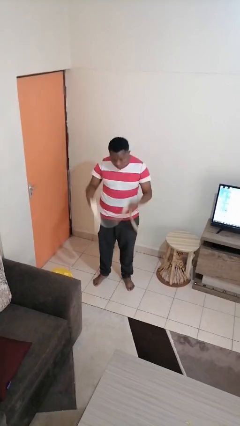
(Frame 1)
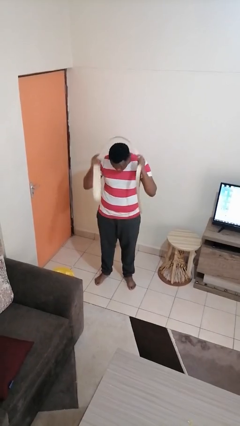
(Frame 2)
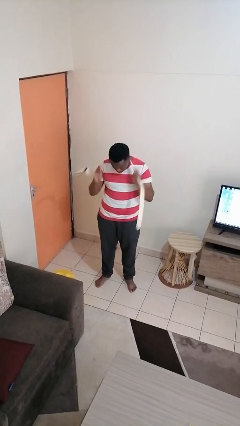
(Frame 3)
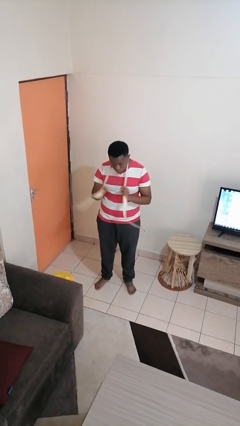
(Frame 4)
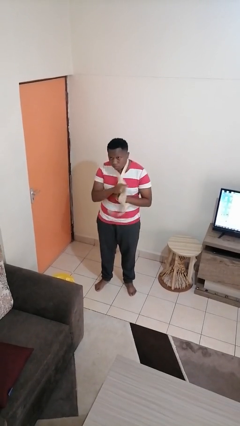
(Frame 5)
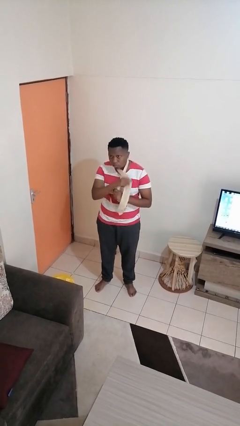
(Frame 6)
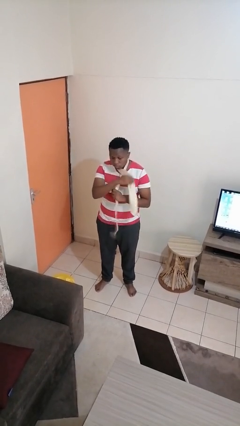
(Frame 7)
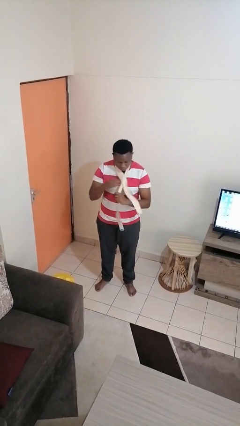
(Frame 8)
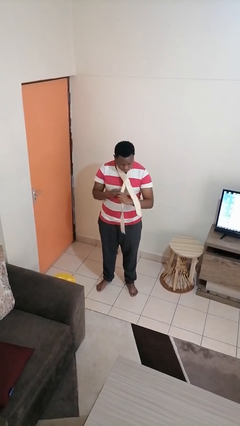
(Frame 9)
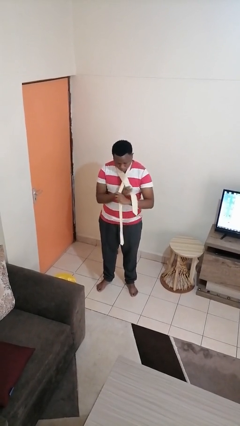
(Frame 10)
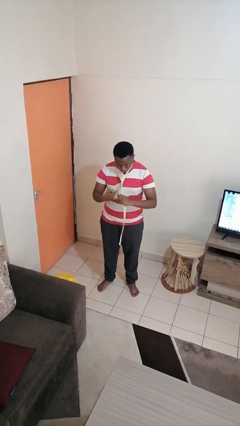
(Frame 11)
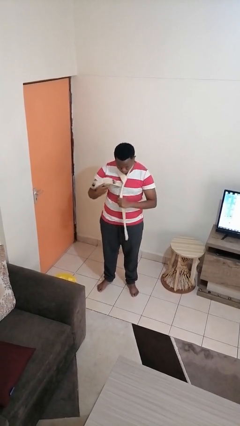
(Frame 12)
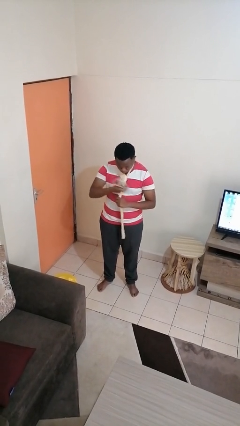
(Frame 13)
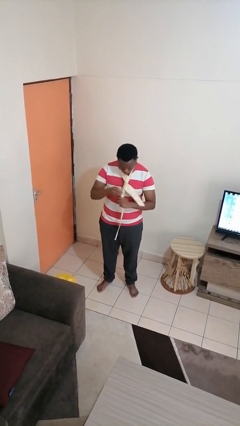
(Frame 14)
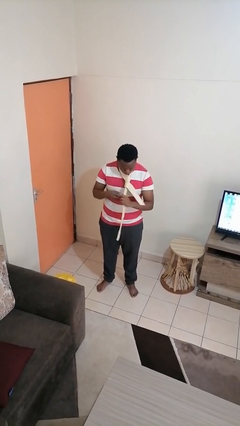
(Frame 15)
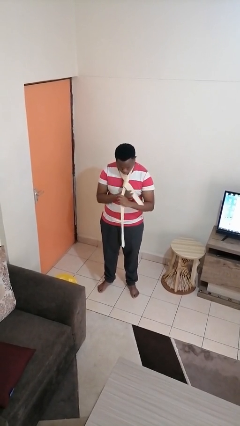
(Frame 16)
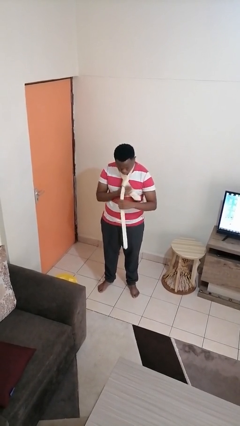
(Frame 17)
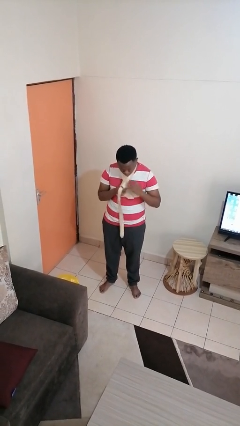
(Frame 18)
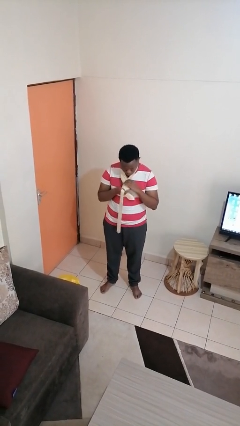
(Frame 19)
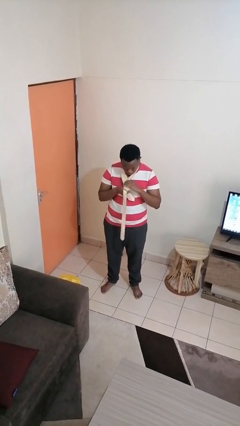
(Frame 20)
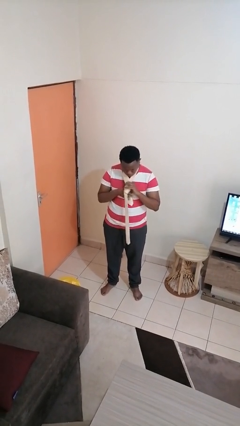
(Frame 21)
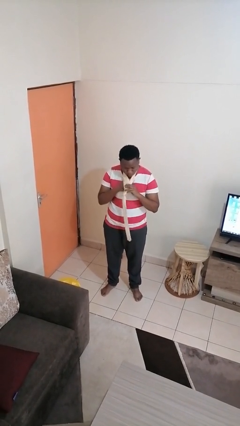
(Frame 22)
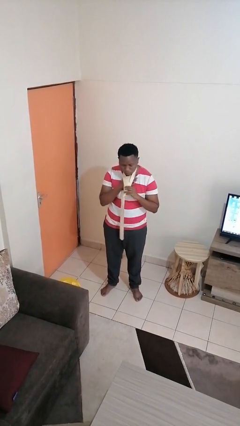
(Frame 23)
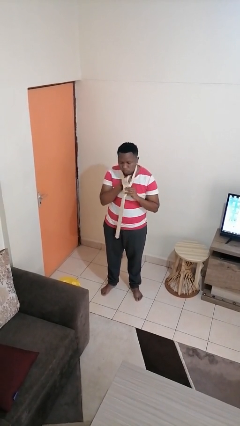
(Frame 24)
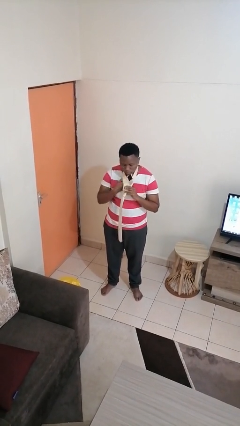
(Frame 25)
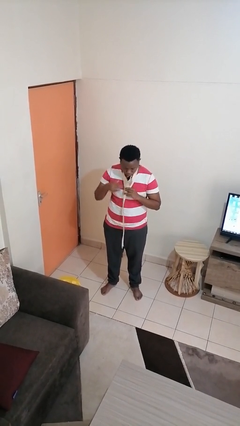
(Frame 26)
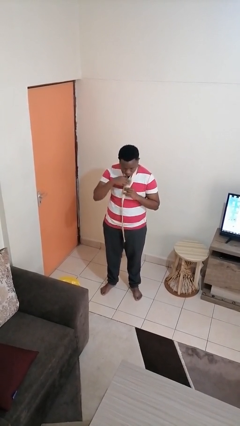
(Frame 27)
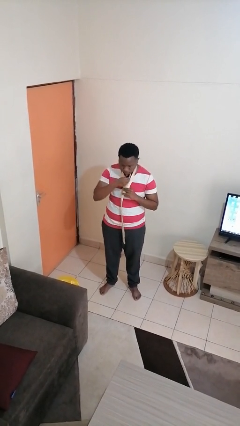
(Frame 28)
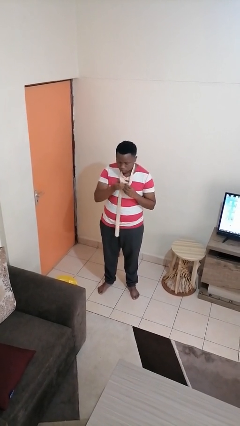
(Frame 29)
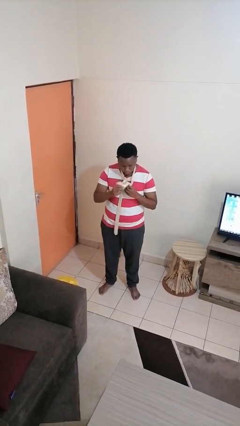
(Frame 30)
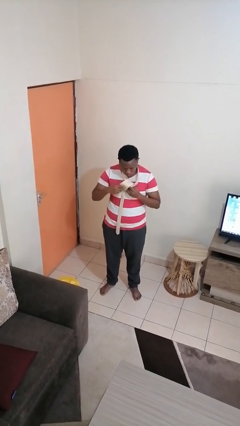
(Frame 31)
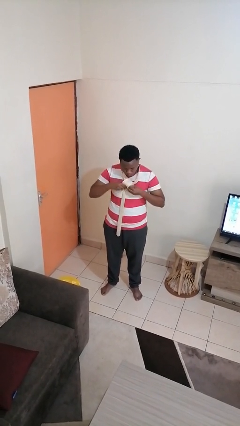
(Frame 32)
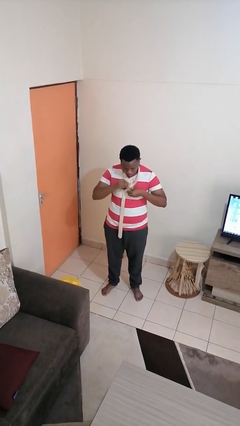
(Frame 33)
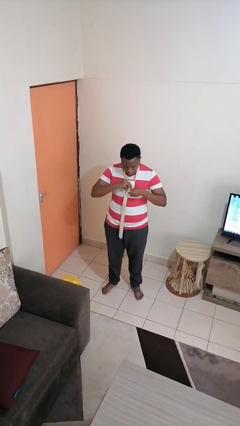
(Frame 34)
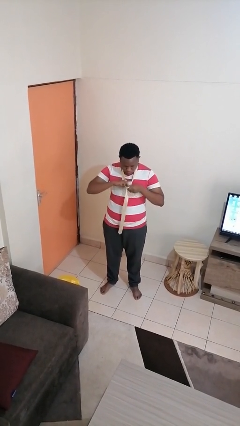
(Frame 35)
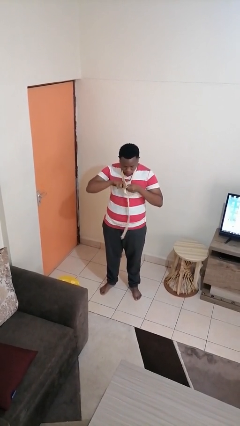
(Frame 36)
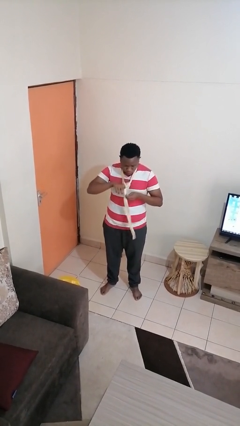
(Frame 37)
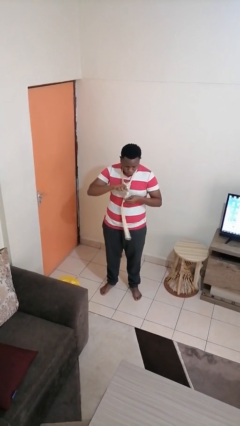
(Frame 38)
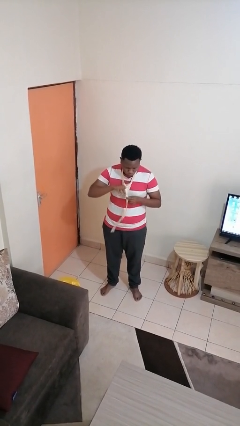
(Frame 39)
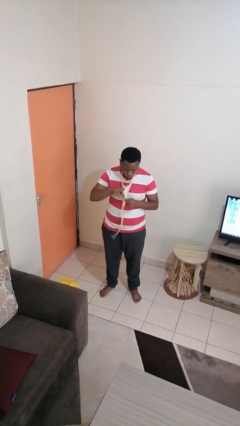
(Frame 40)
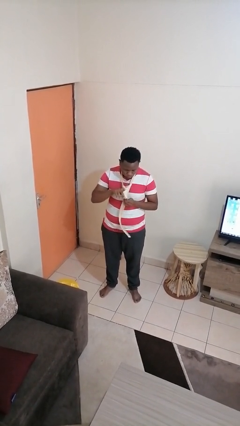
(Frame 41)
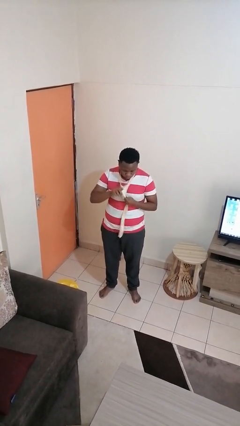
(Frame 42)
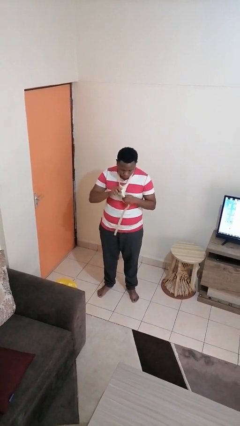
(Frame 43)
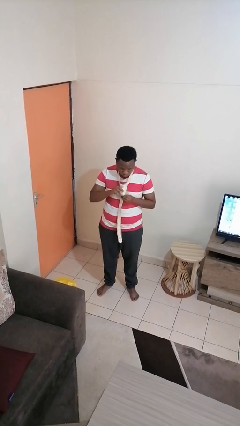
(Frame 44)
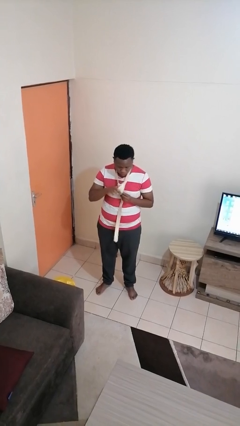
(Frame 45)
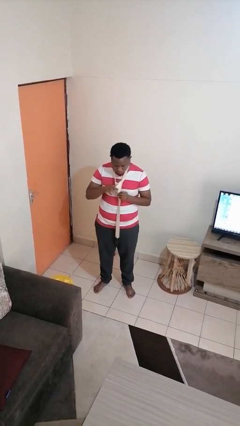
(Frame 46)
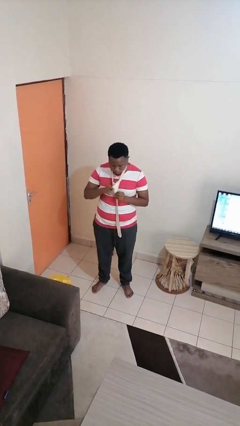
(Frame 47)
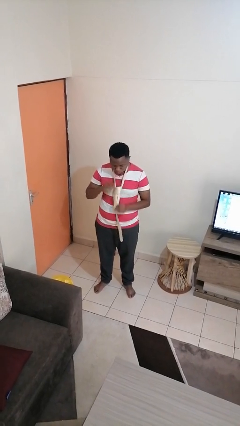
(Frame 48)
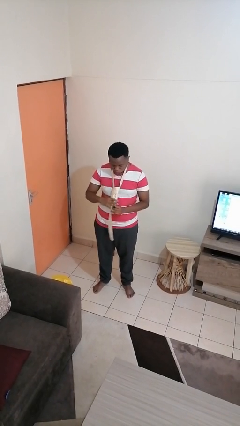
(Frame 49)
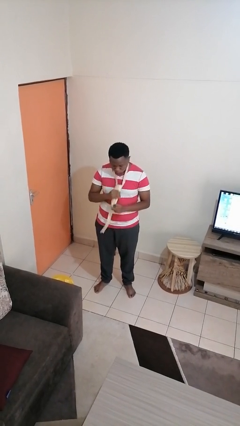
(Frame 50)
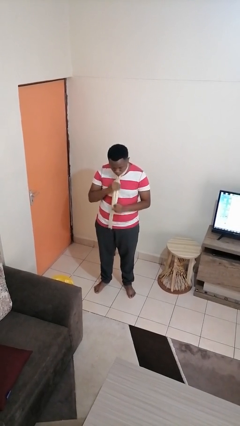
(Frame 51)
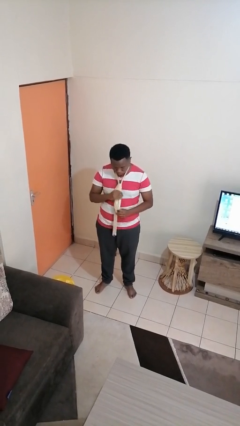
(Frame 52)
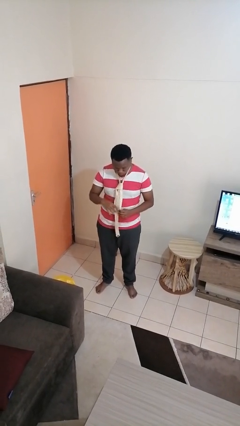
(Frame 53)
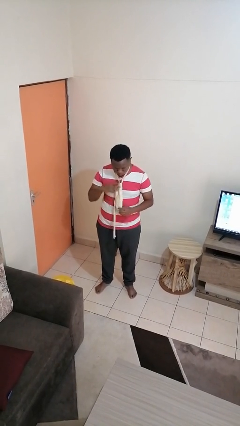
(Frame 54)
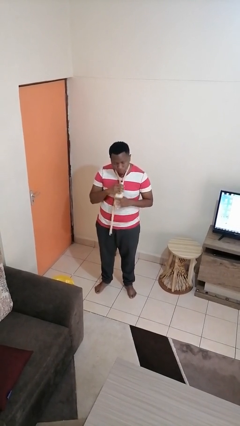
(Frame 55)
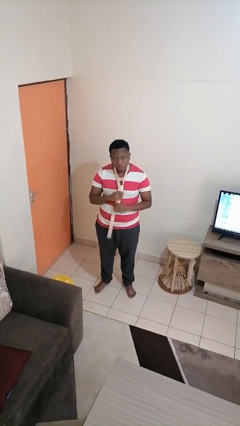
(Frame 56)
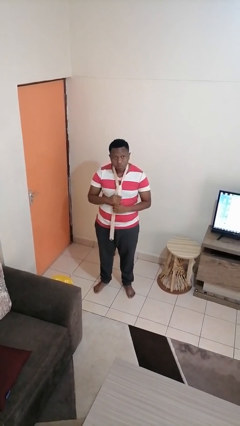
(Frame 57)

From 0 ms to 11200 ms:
person puts on necktie

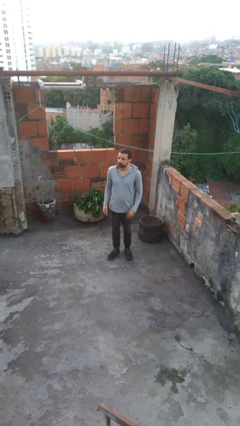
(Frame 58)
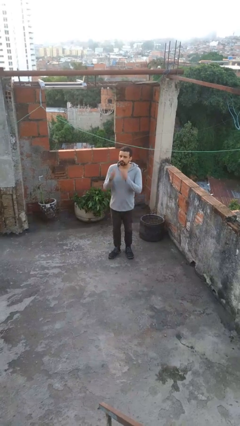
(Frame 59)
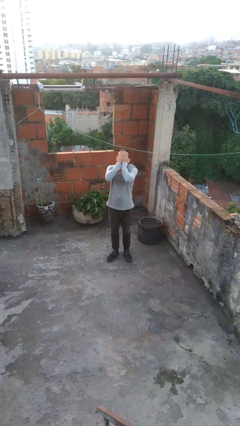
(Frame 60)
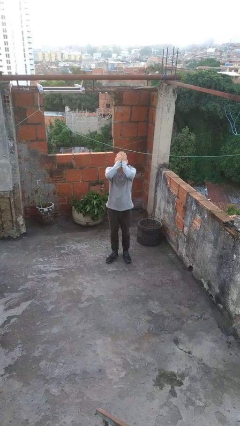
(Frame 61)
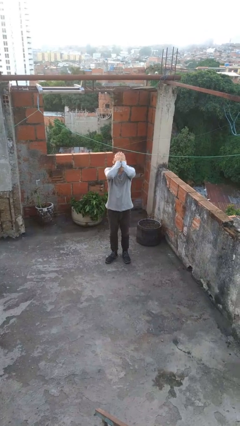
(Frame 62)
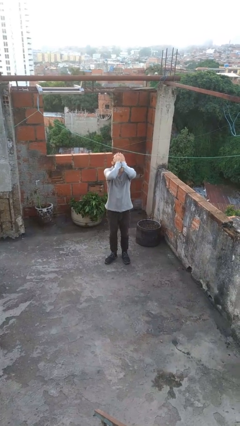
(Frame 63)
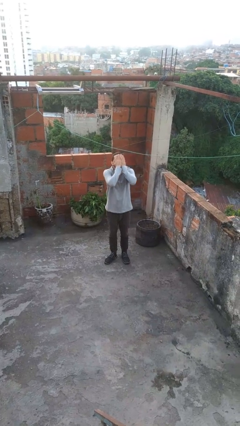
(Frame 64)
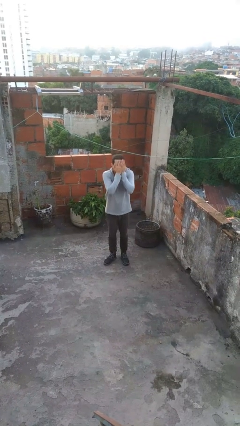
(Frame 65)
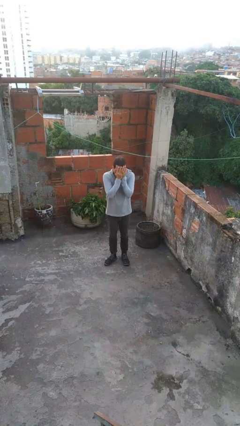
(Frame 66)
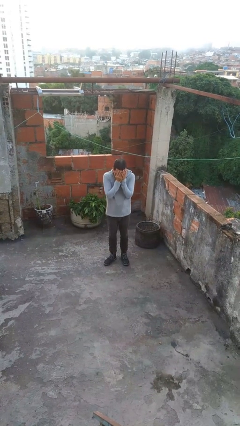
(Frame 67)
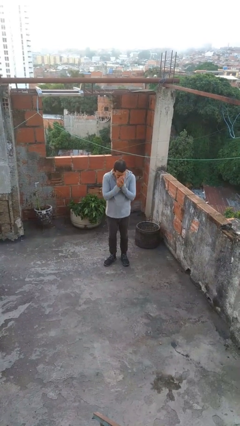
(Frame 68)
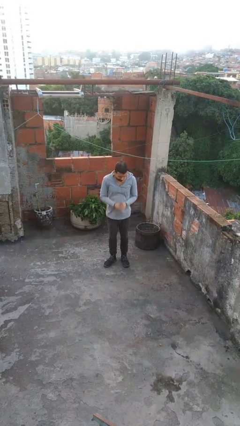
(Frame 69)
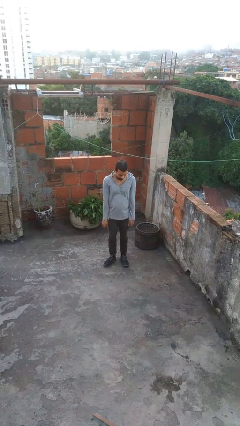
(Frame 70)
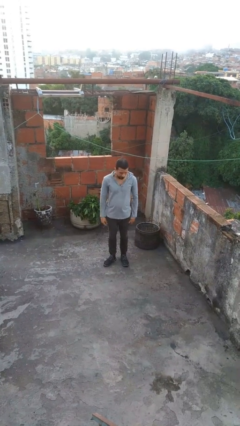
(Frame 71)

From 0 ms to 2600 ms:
person covers face with hands

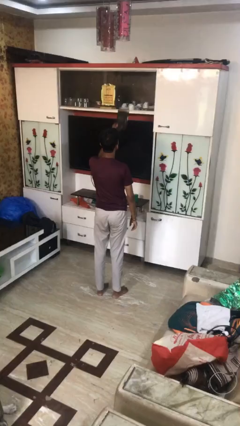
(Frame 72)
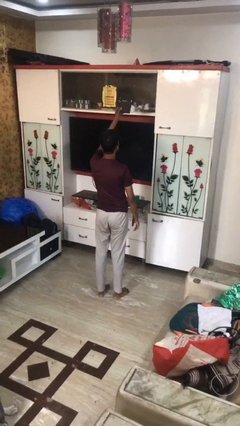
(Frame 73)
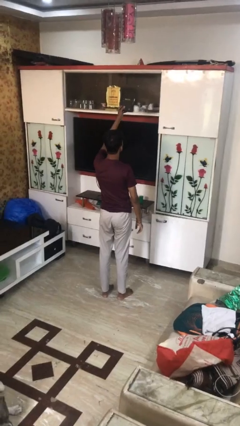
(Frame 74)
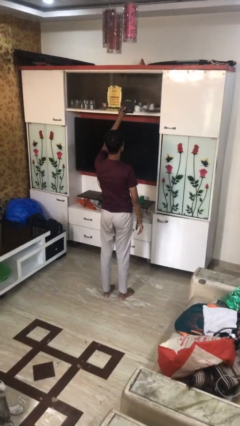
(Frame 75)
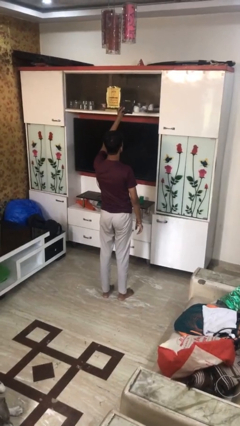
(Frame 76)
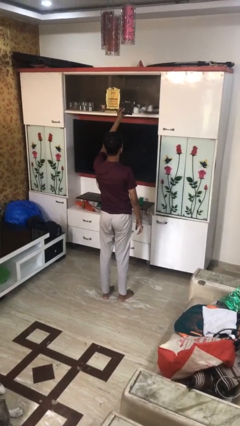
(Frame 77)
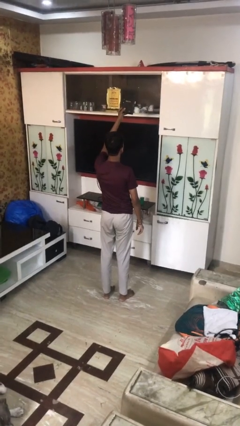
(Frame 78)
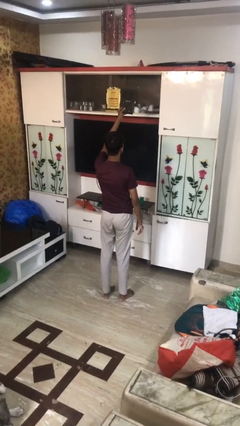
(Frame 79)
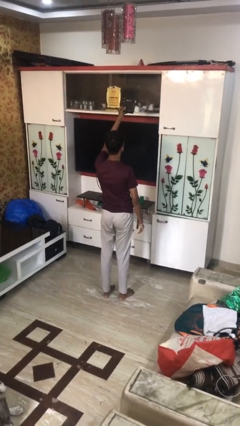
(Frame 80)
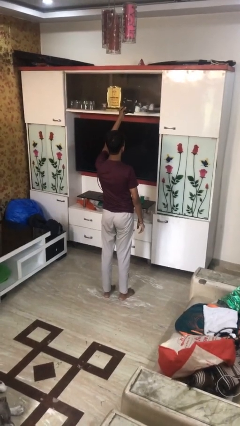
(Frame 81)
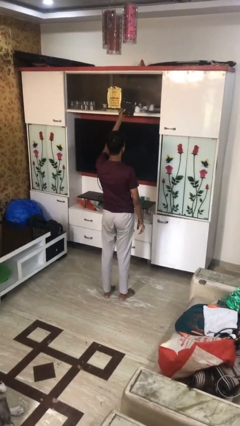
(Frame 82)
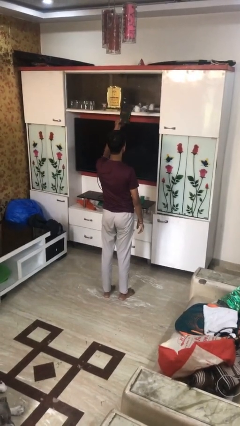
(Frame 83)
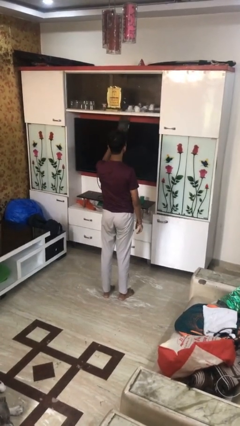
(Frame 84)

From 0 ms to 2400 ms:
person holds object above head

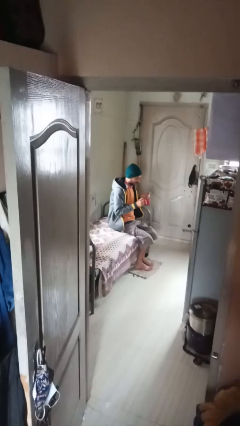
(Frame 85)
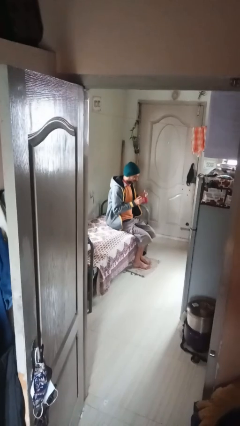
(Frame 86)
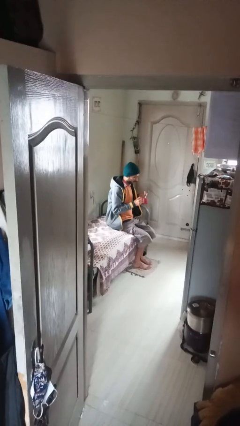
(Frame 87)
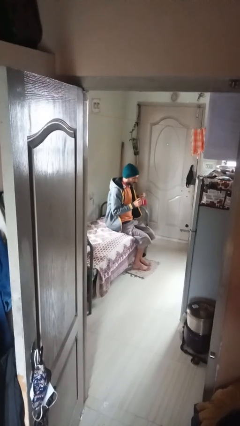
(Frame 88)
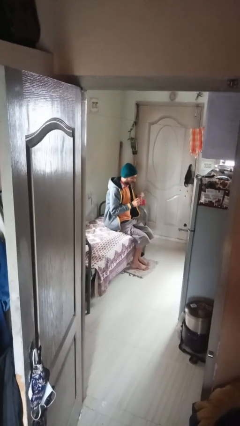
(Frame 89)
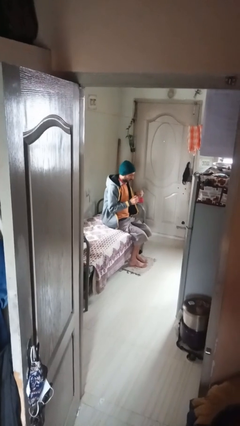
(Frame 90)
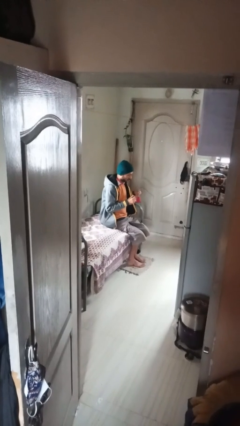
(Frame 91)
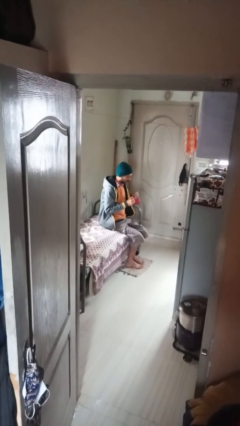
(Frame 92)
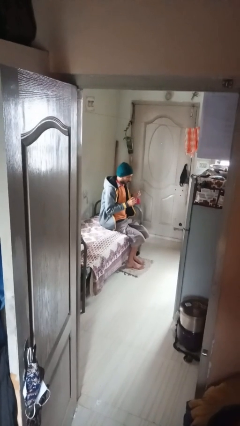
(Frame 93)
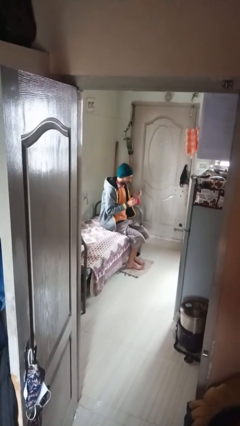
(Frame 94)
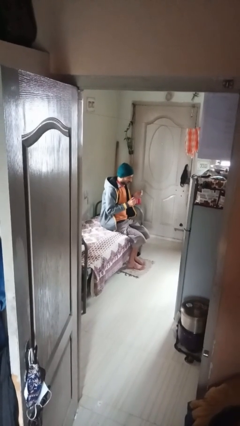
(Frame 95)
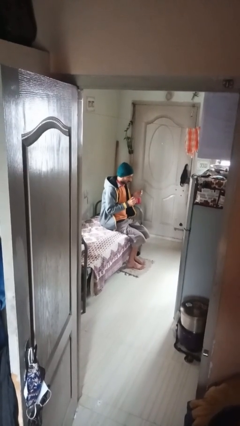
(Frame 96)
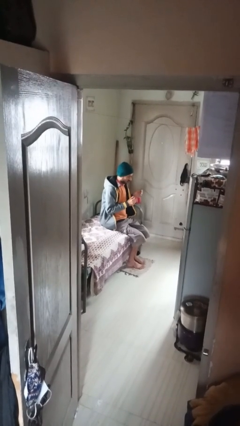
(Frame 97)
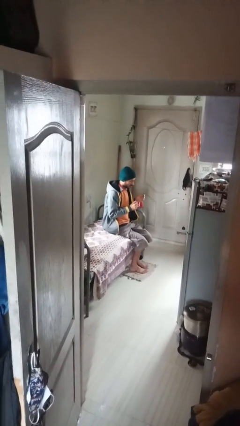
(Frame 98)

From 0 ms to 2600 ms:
person stirs mug
